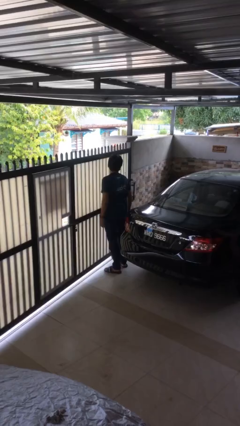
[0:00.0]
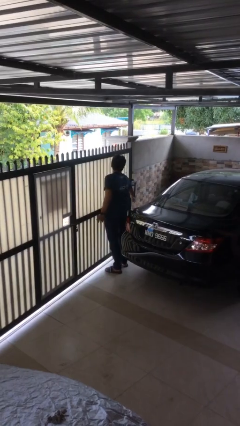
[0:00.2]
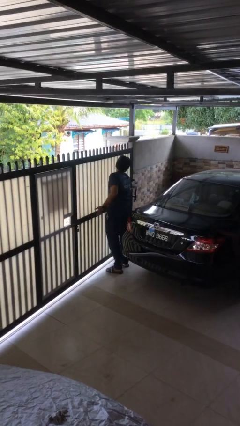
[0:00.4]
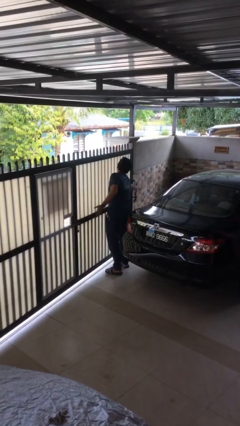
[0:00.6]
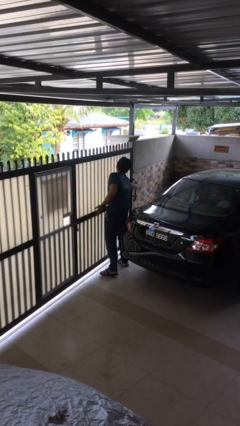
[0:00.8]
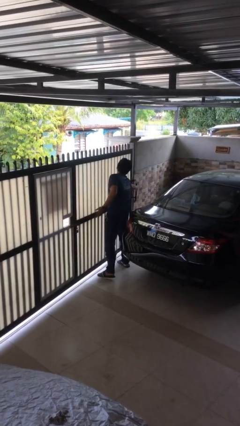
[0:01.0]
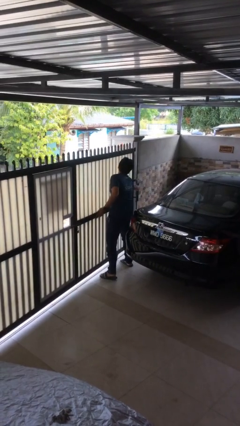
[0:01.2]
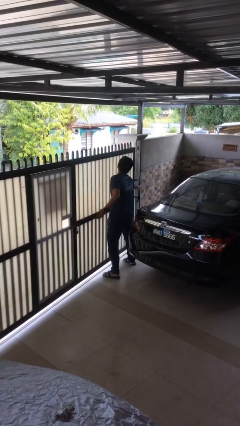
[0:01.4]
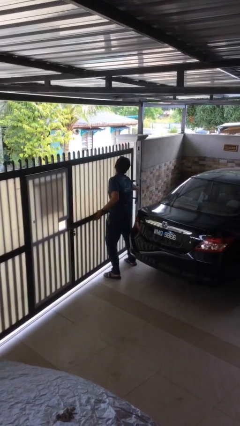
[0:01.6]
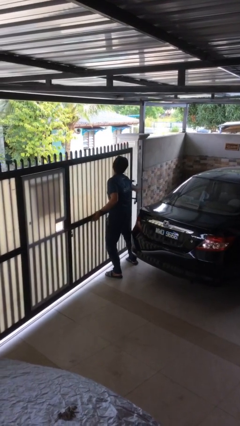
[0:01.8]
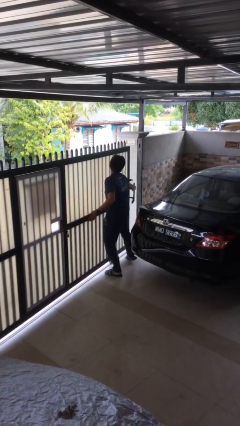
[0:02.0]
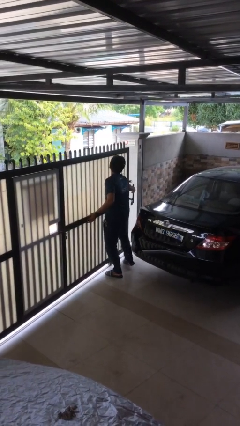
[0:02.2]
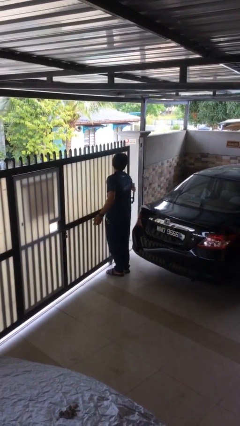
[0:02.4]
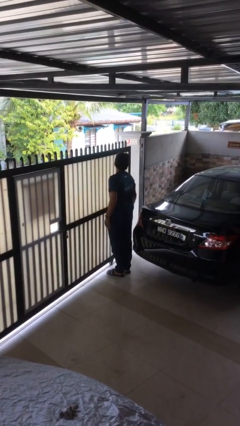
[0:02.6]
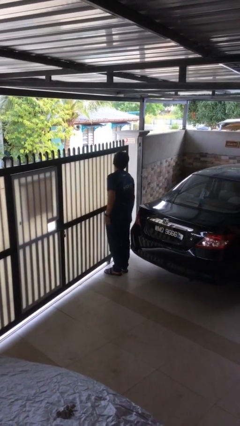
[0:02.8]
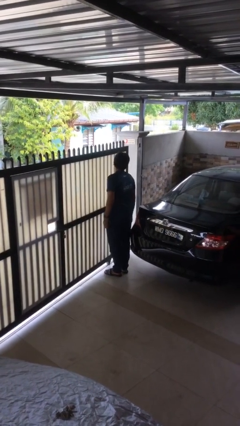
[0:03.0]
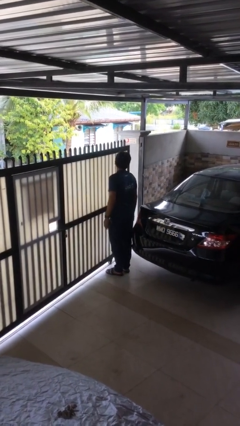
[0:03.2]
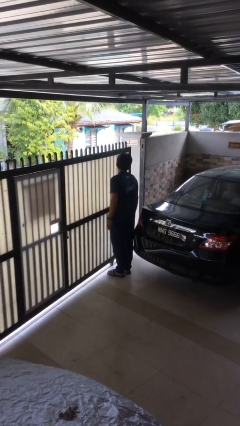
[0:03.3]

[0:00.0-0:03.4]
person opens sliding door

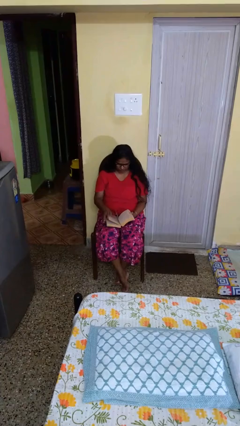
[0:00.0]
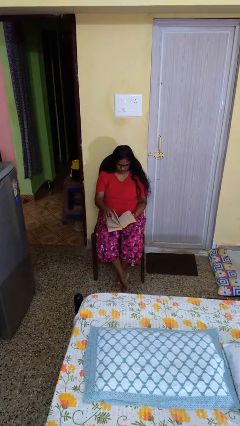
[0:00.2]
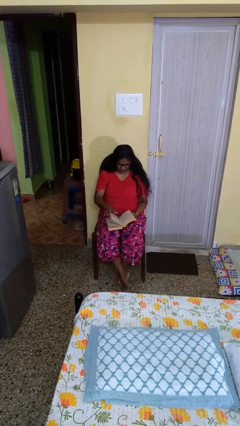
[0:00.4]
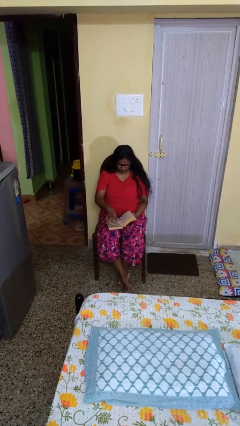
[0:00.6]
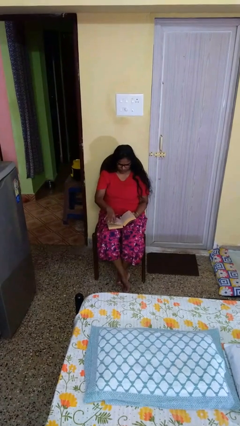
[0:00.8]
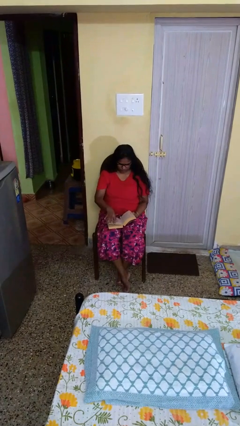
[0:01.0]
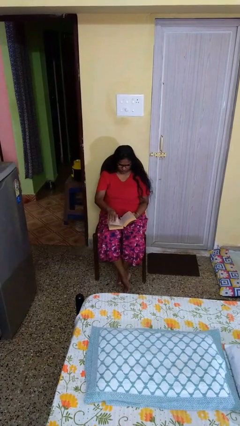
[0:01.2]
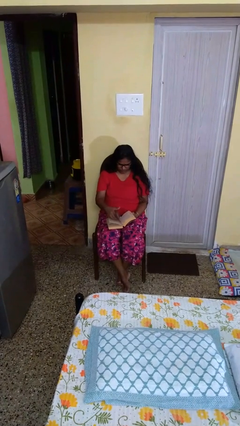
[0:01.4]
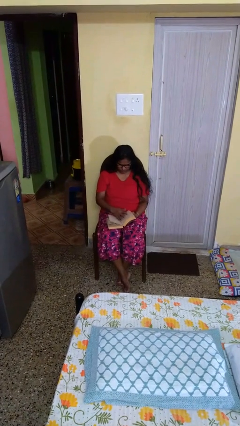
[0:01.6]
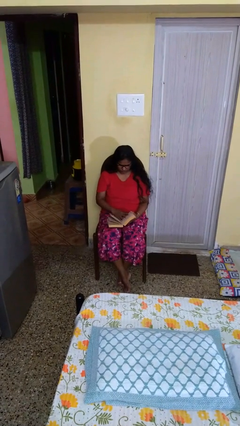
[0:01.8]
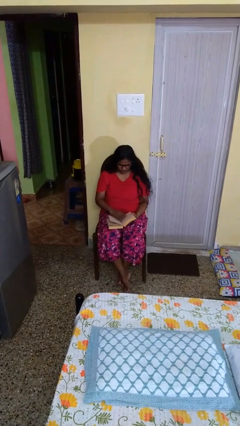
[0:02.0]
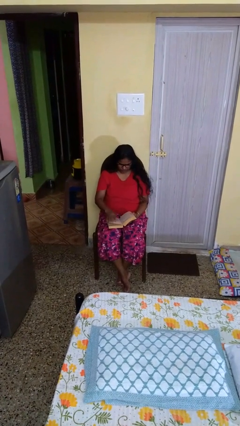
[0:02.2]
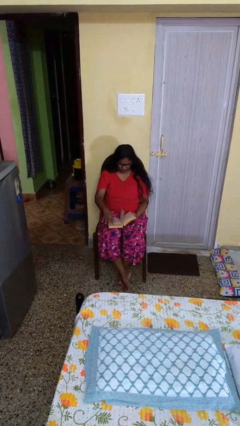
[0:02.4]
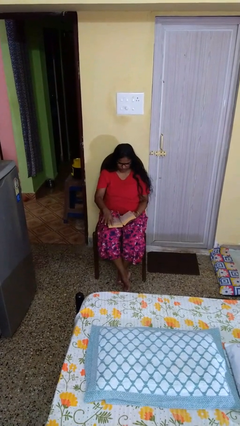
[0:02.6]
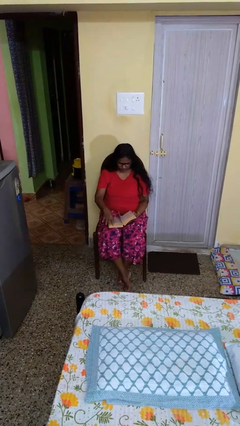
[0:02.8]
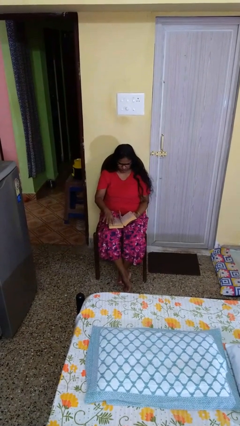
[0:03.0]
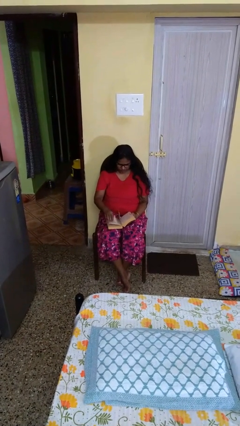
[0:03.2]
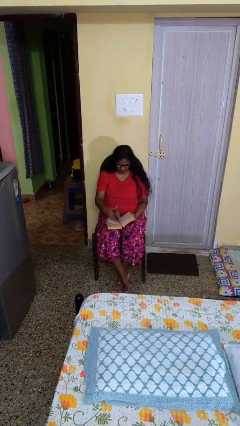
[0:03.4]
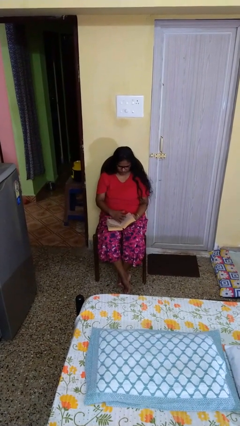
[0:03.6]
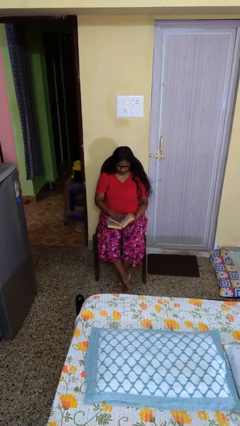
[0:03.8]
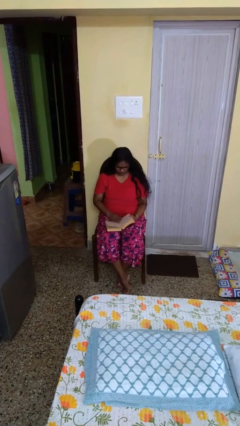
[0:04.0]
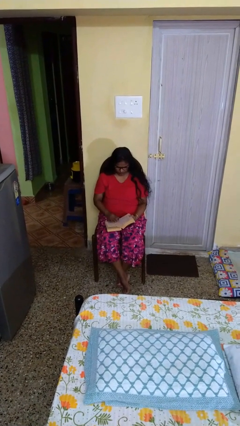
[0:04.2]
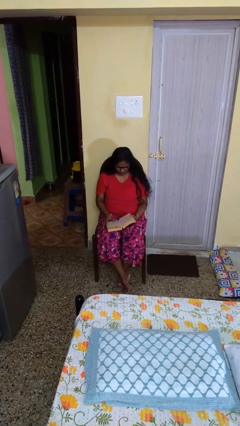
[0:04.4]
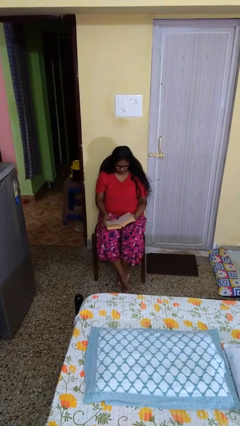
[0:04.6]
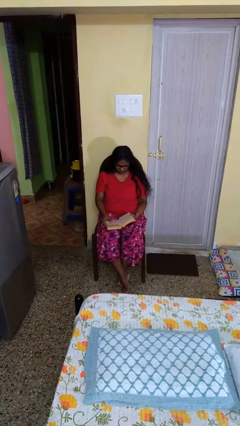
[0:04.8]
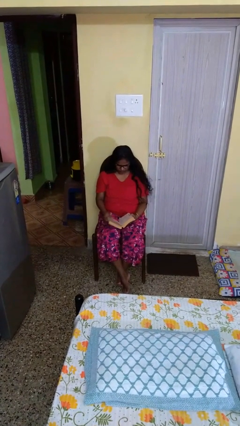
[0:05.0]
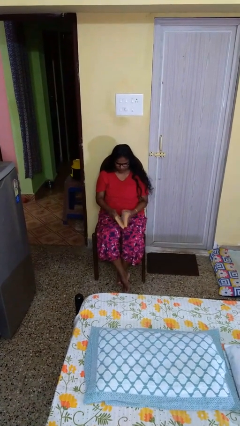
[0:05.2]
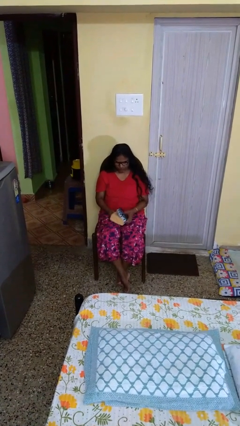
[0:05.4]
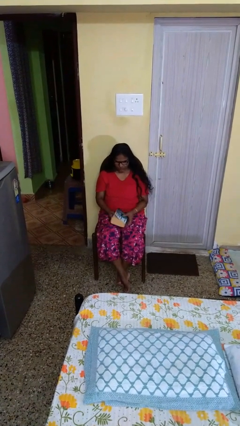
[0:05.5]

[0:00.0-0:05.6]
person reads book

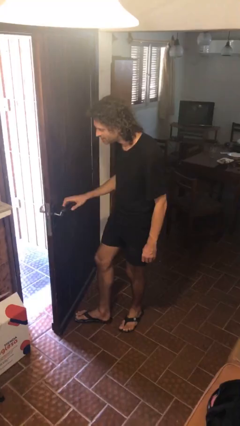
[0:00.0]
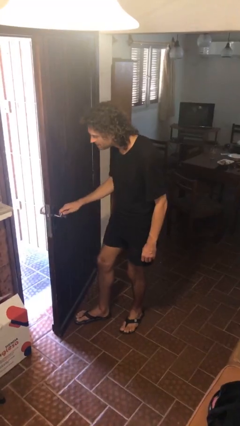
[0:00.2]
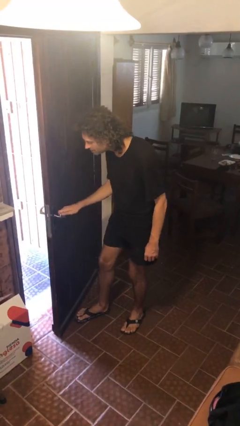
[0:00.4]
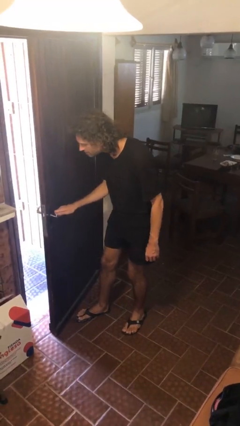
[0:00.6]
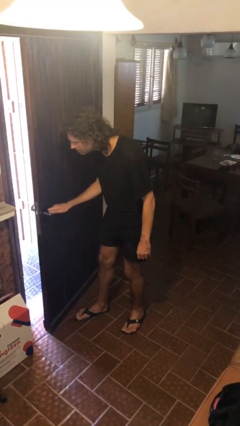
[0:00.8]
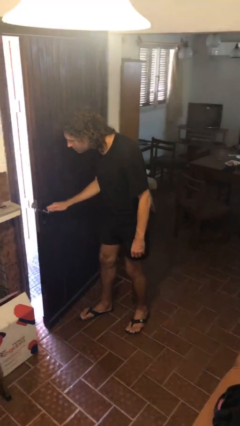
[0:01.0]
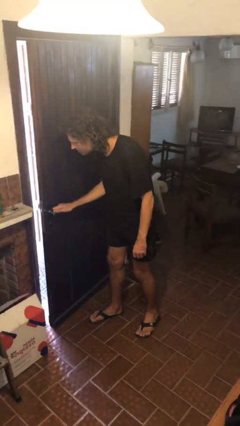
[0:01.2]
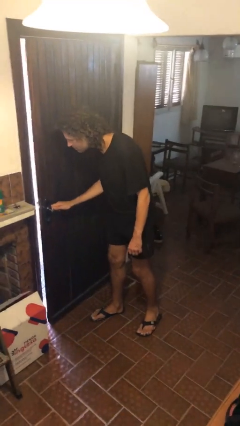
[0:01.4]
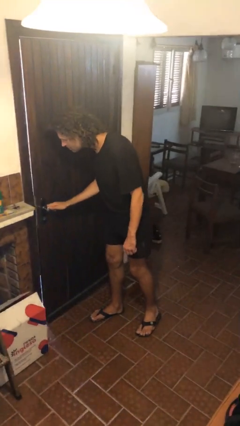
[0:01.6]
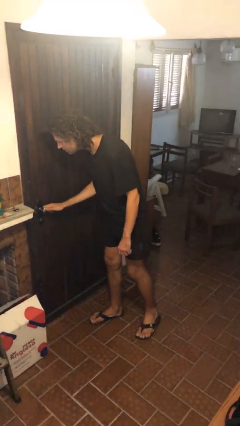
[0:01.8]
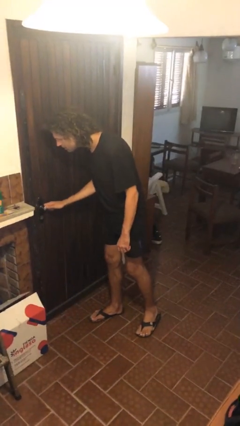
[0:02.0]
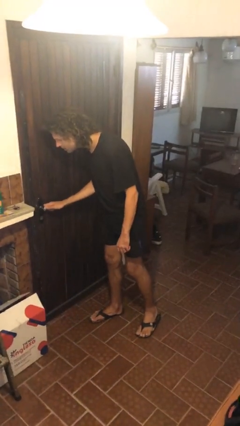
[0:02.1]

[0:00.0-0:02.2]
person closes facility door

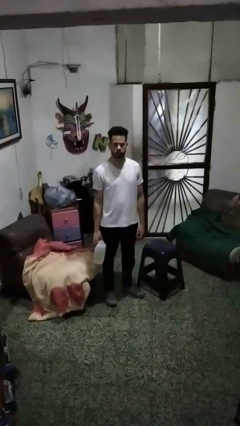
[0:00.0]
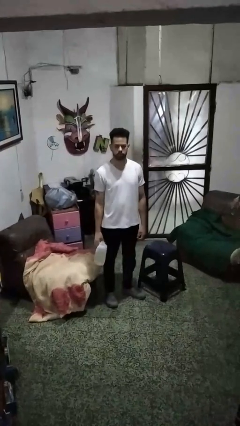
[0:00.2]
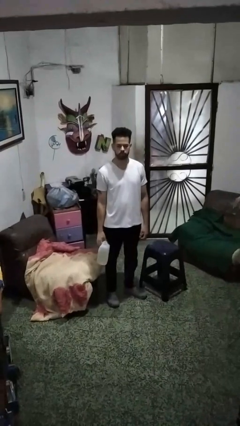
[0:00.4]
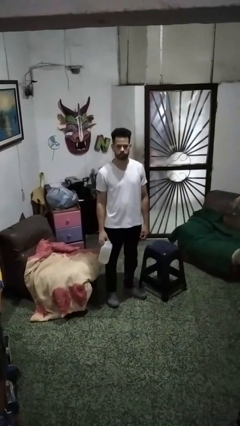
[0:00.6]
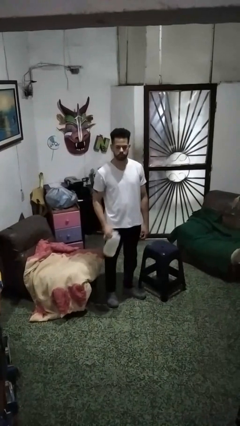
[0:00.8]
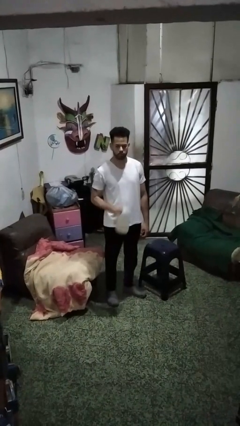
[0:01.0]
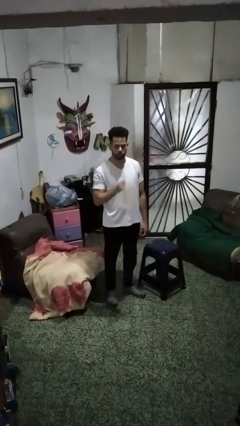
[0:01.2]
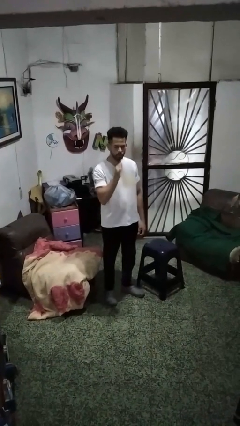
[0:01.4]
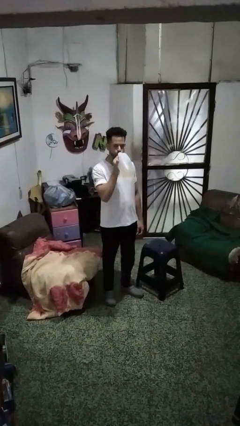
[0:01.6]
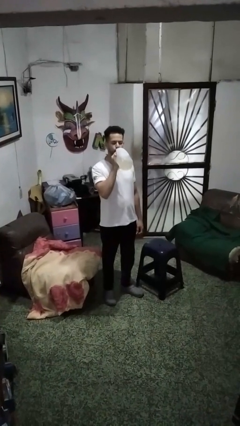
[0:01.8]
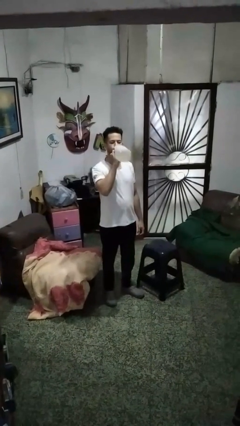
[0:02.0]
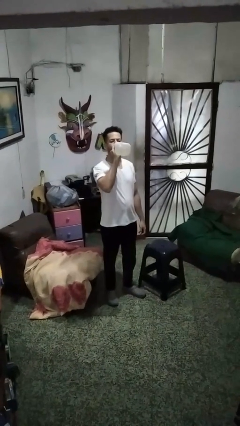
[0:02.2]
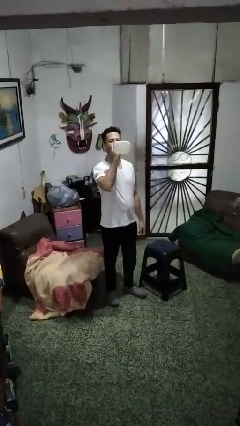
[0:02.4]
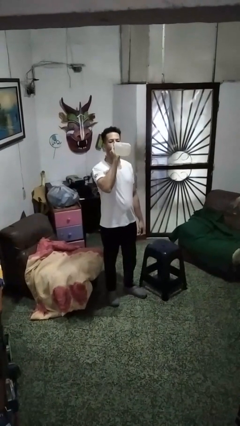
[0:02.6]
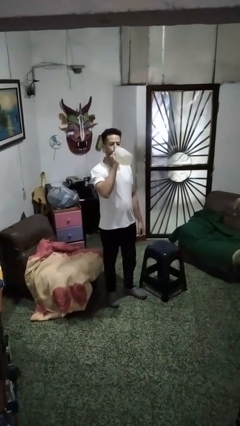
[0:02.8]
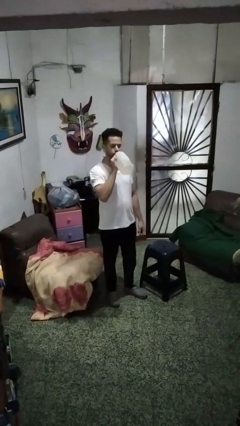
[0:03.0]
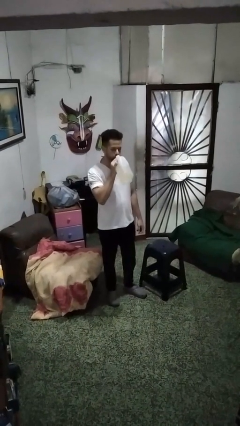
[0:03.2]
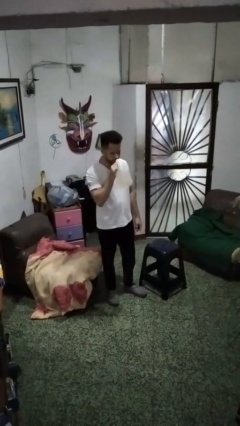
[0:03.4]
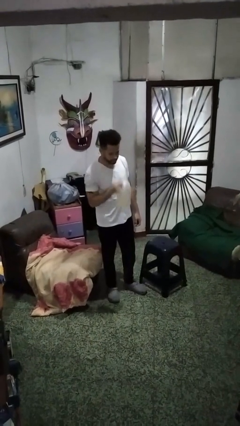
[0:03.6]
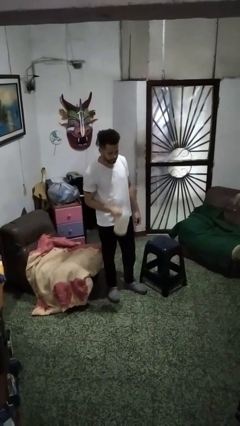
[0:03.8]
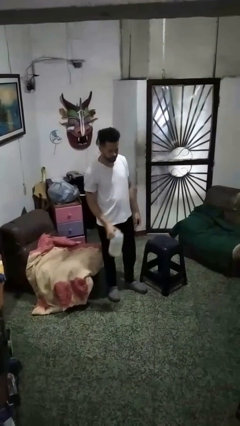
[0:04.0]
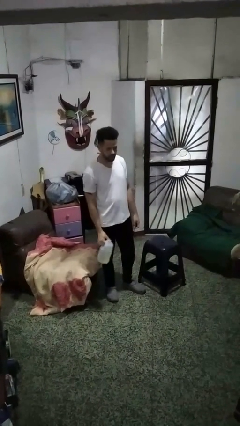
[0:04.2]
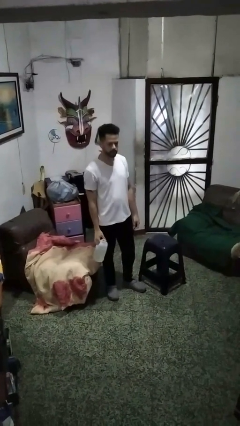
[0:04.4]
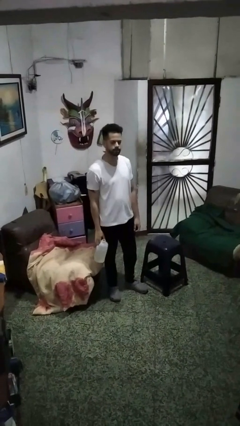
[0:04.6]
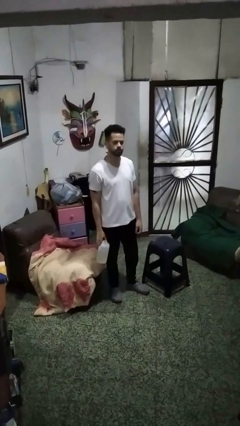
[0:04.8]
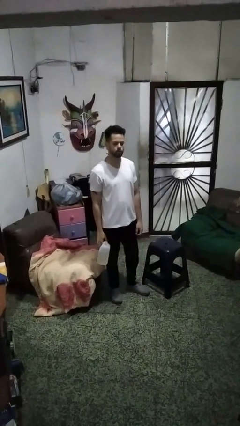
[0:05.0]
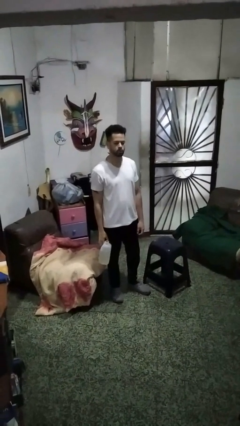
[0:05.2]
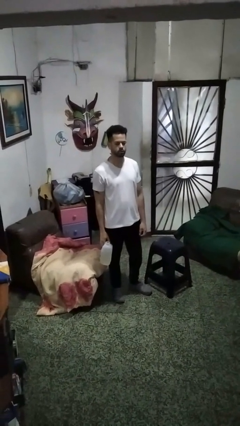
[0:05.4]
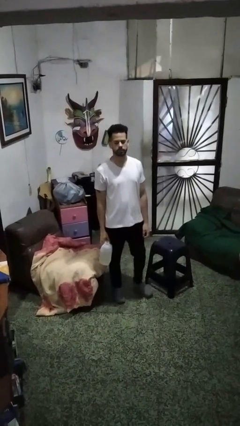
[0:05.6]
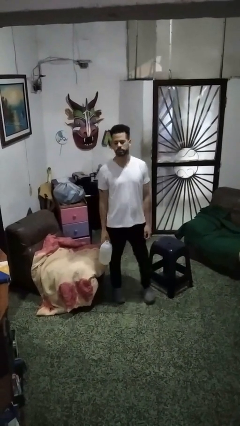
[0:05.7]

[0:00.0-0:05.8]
person drinks from bottle

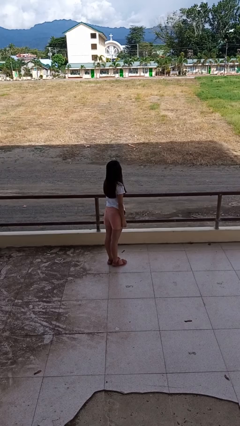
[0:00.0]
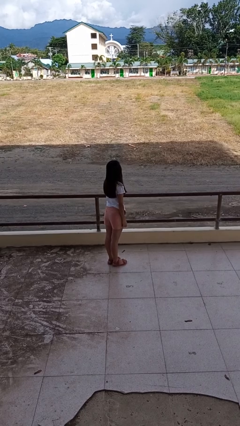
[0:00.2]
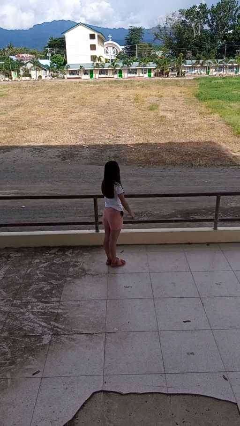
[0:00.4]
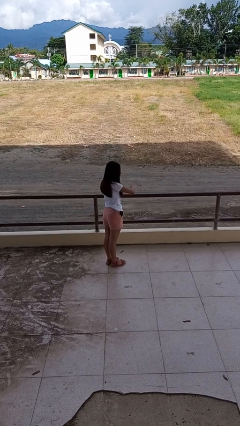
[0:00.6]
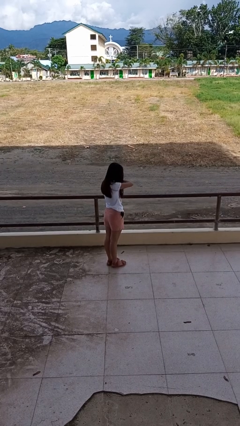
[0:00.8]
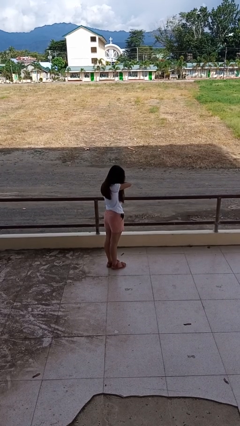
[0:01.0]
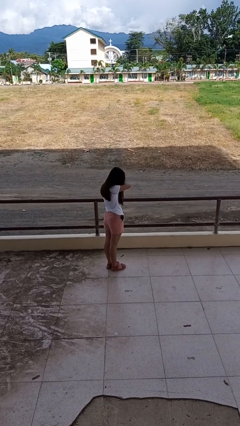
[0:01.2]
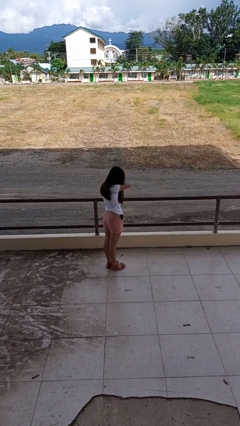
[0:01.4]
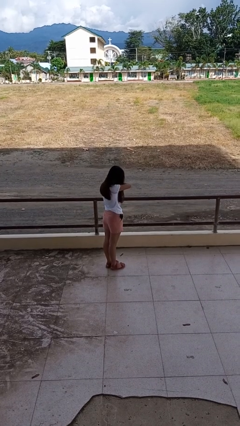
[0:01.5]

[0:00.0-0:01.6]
person sneezes into arm
